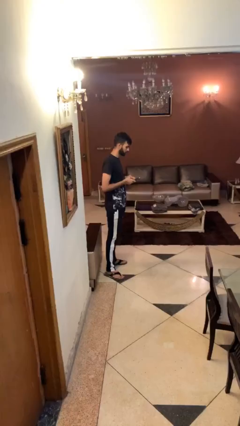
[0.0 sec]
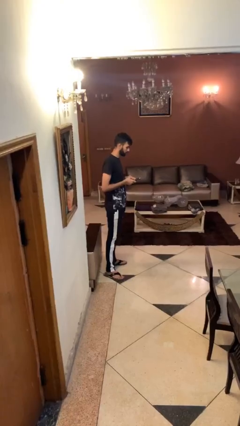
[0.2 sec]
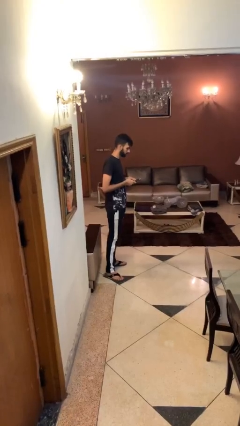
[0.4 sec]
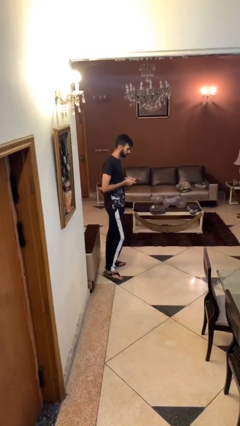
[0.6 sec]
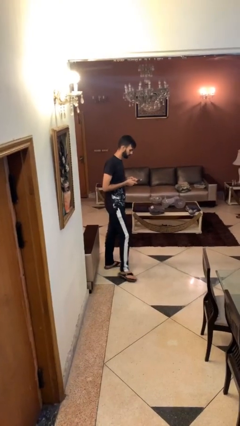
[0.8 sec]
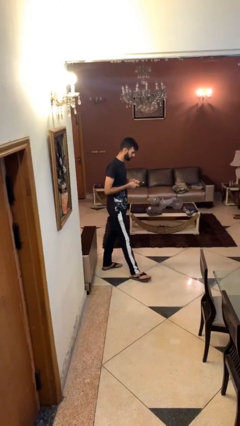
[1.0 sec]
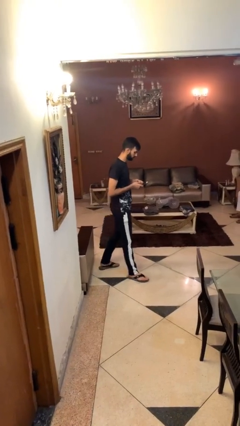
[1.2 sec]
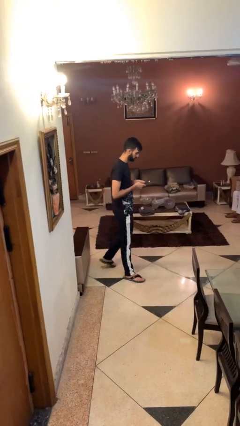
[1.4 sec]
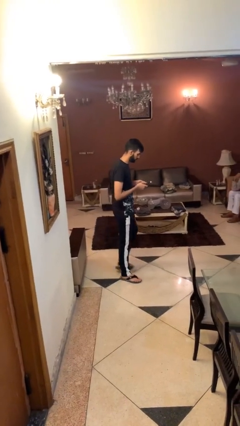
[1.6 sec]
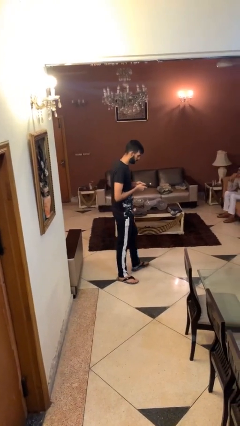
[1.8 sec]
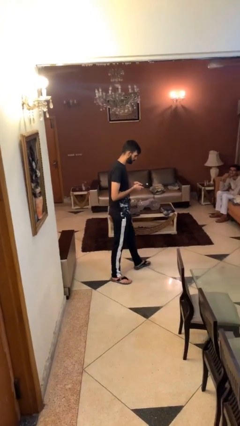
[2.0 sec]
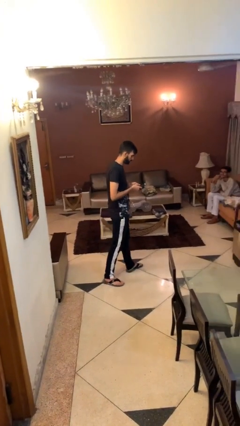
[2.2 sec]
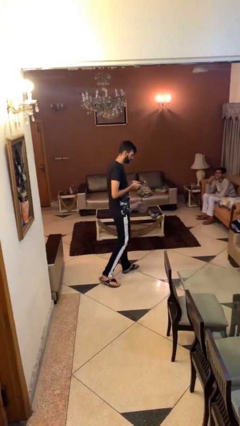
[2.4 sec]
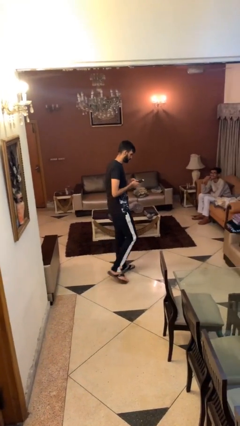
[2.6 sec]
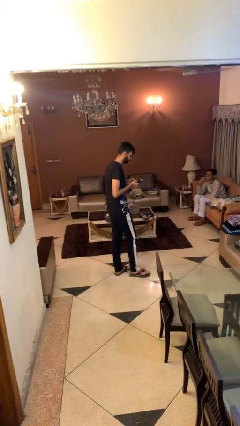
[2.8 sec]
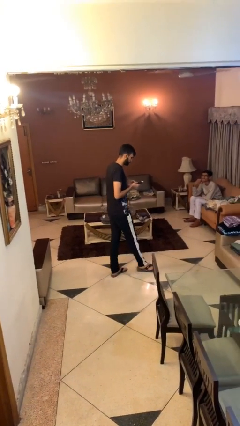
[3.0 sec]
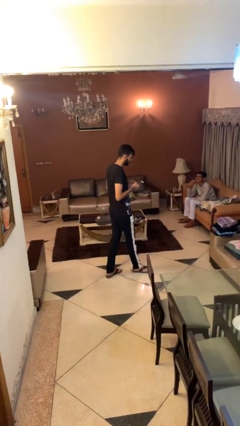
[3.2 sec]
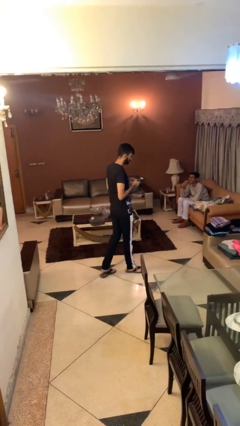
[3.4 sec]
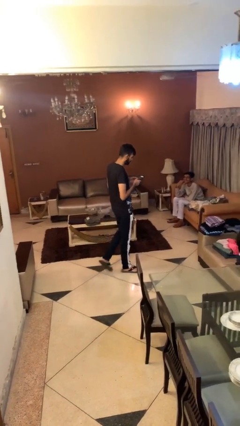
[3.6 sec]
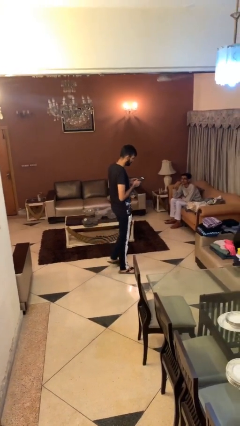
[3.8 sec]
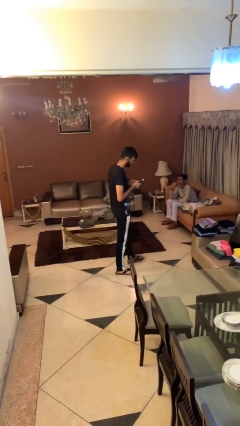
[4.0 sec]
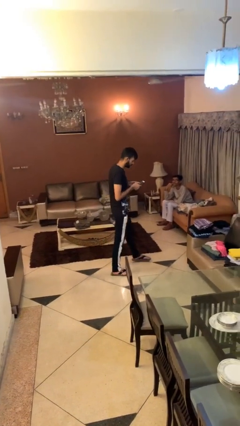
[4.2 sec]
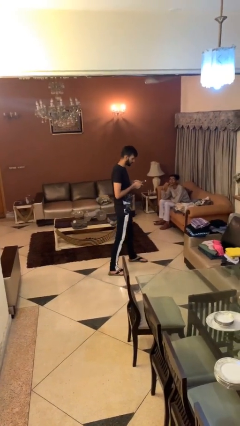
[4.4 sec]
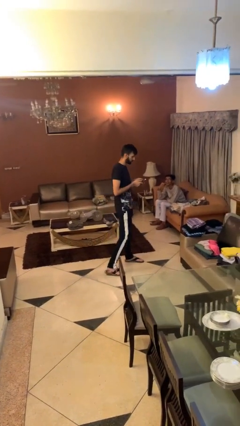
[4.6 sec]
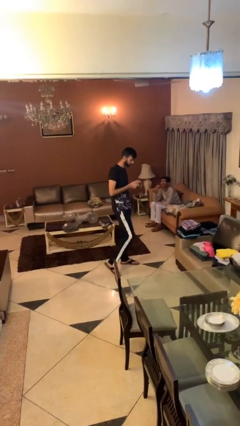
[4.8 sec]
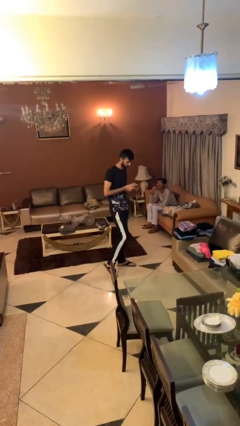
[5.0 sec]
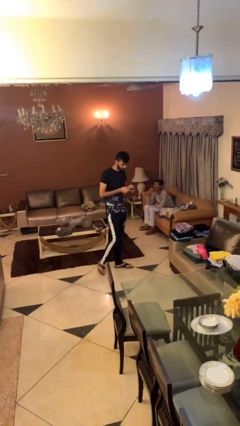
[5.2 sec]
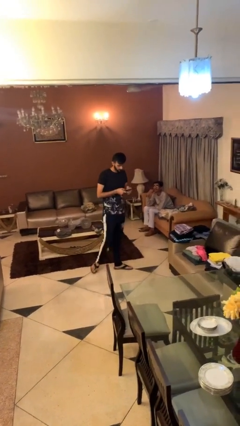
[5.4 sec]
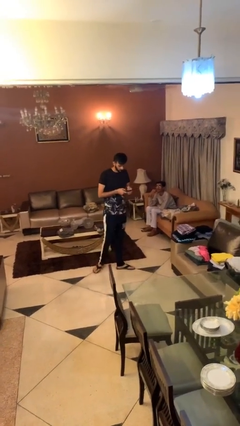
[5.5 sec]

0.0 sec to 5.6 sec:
person texts on phone

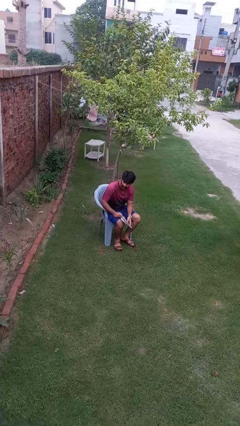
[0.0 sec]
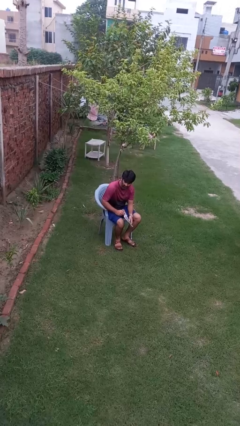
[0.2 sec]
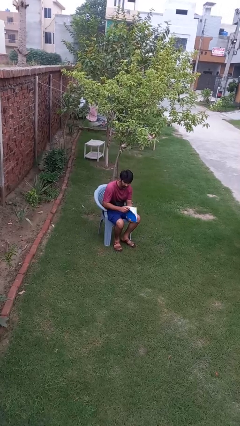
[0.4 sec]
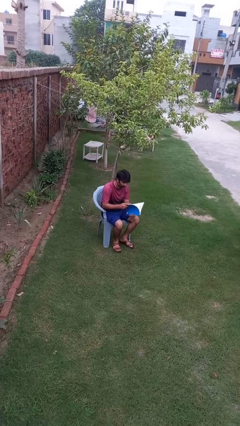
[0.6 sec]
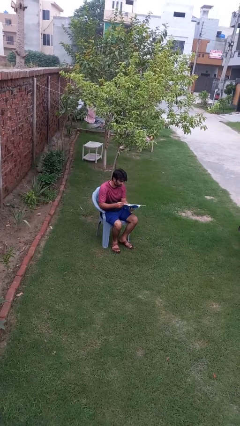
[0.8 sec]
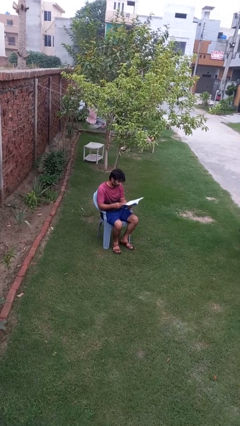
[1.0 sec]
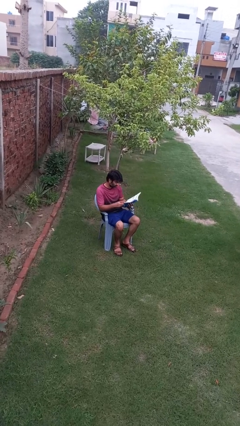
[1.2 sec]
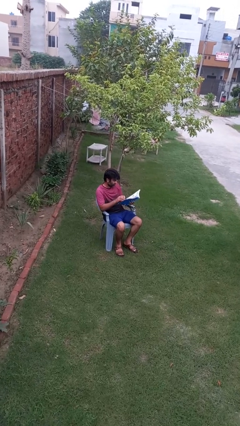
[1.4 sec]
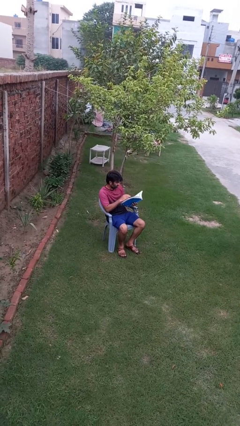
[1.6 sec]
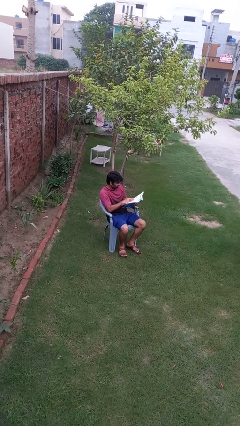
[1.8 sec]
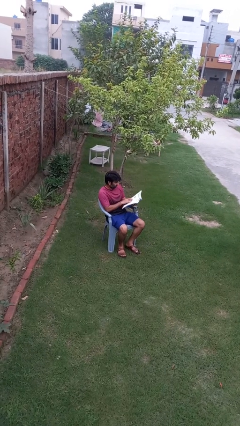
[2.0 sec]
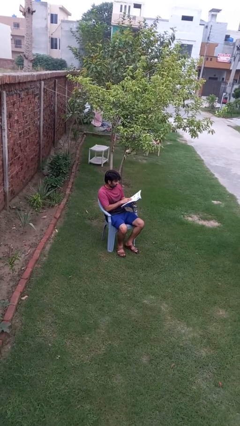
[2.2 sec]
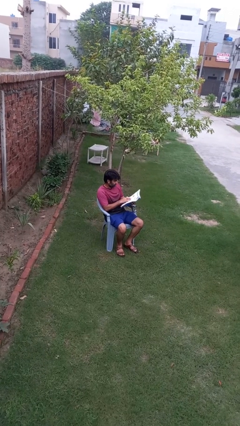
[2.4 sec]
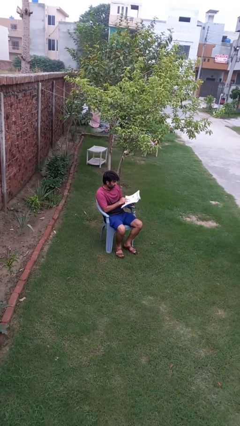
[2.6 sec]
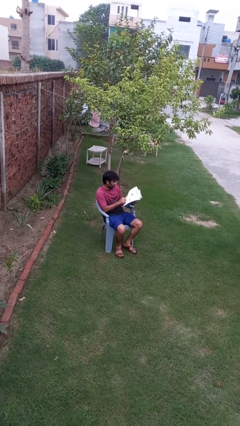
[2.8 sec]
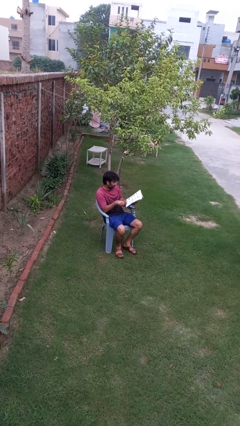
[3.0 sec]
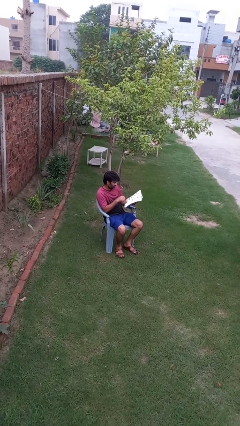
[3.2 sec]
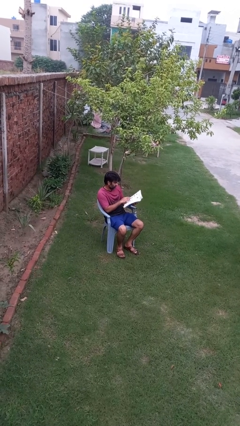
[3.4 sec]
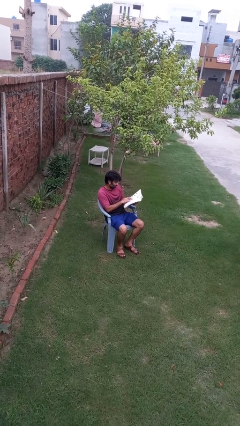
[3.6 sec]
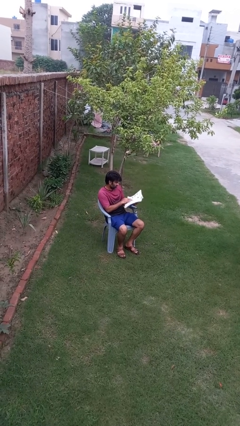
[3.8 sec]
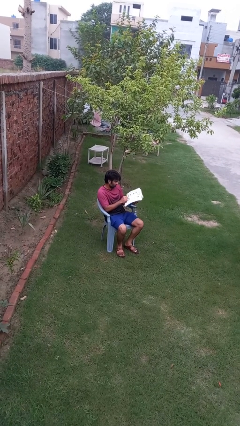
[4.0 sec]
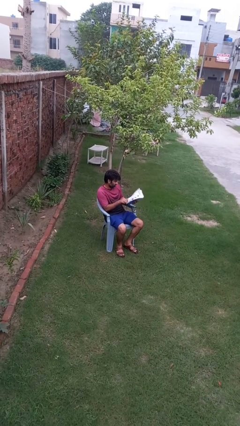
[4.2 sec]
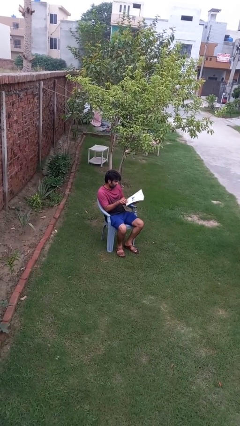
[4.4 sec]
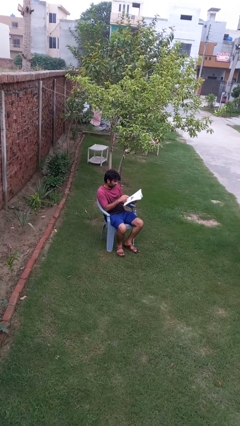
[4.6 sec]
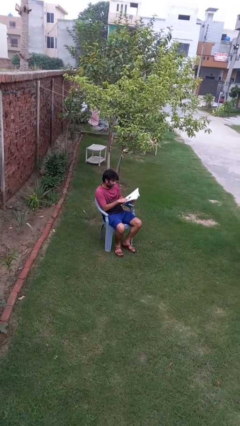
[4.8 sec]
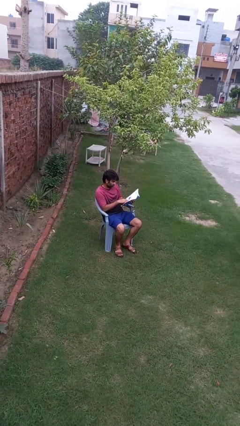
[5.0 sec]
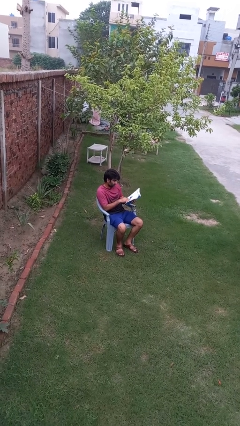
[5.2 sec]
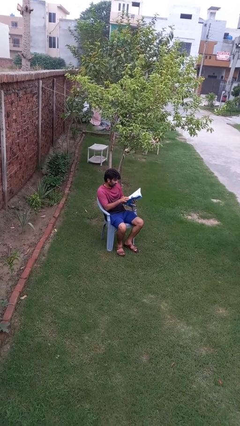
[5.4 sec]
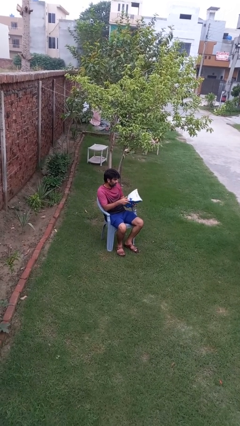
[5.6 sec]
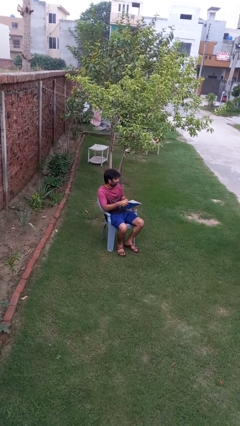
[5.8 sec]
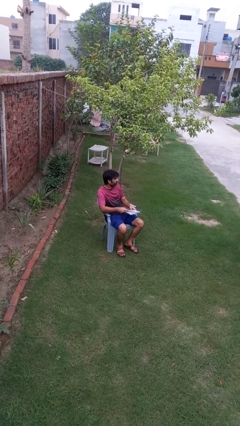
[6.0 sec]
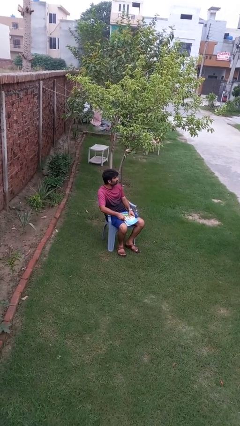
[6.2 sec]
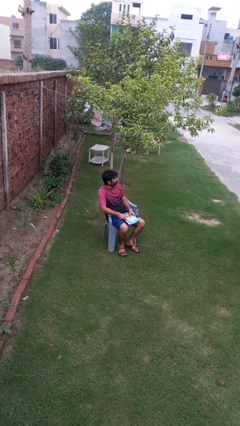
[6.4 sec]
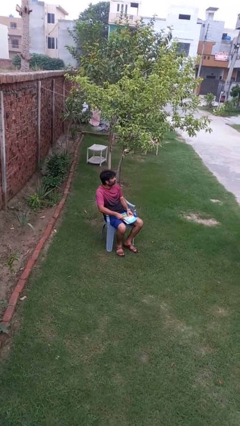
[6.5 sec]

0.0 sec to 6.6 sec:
person reads book

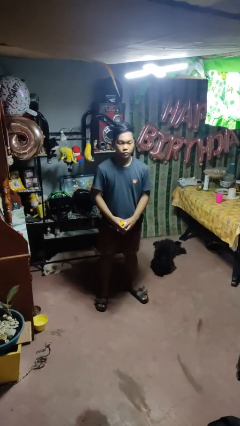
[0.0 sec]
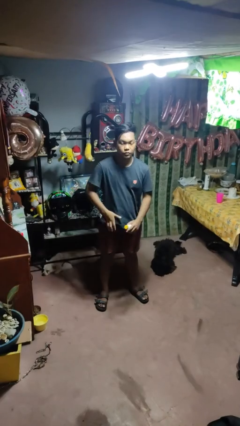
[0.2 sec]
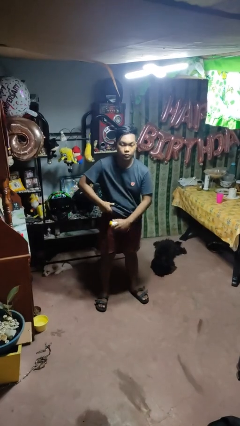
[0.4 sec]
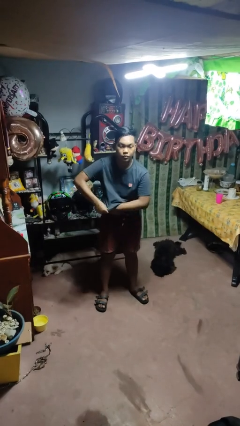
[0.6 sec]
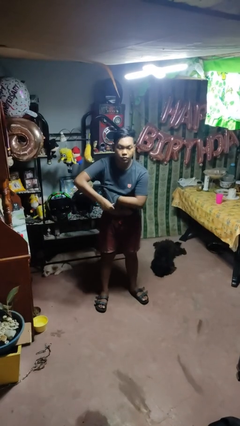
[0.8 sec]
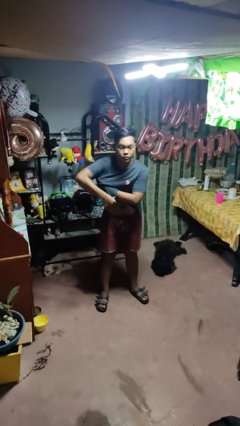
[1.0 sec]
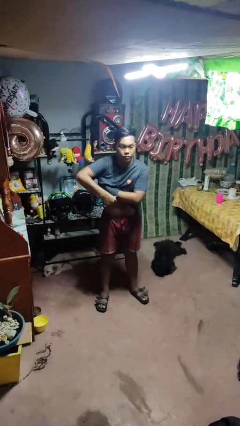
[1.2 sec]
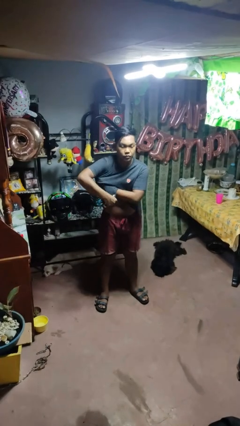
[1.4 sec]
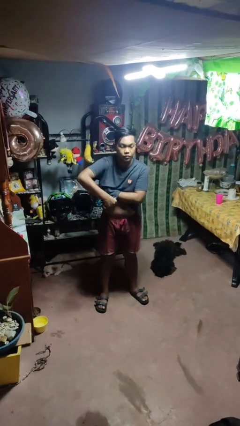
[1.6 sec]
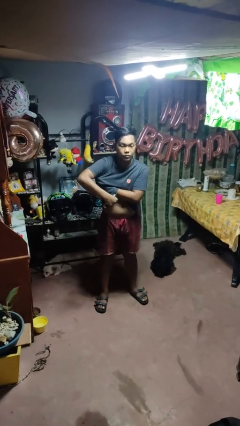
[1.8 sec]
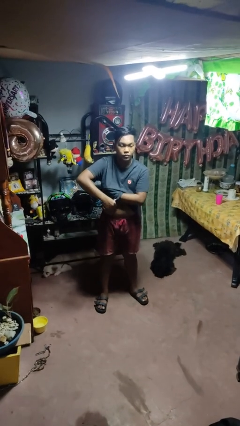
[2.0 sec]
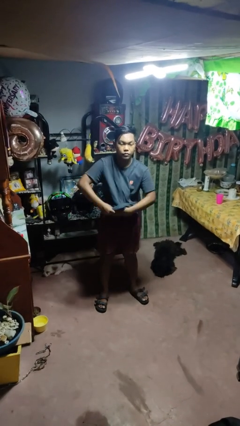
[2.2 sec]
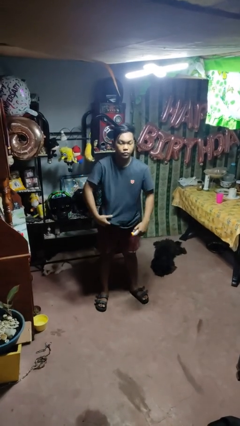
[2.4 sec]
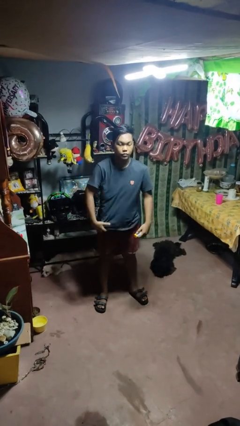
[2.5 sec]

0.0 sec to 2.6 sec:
person applies deodorant

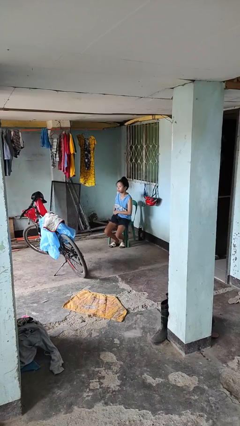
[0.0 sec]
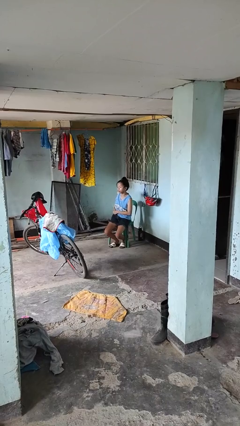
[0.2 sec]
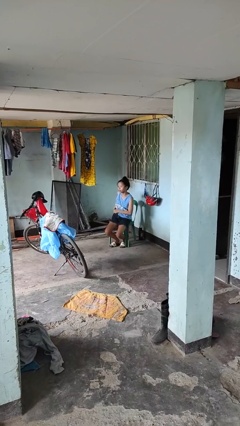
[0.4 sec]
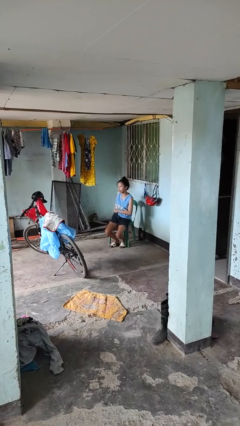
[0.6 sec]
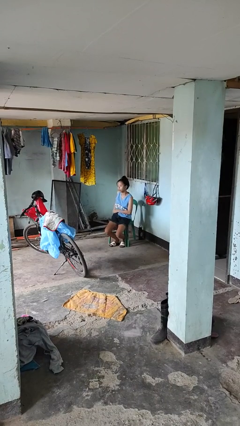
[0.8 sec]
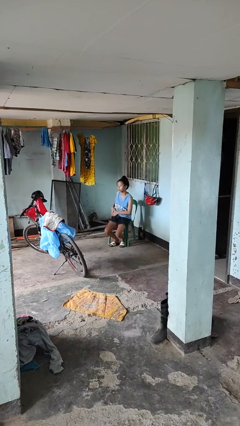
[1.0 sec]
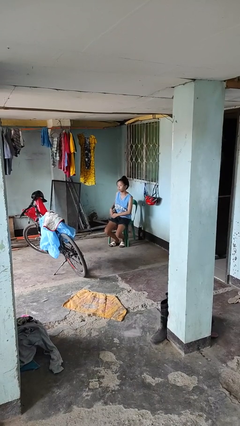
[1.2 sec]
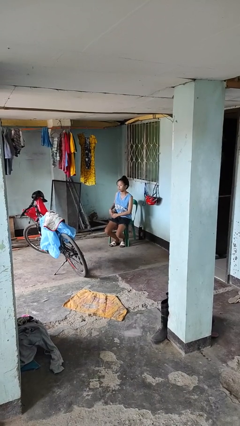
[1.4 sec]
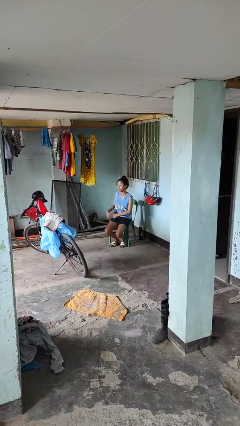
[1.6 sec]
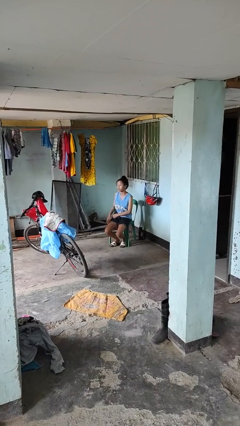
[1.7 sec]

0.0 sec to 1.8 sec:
person puts phone into pocket

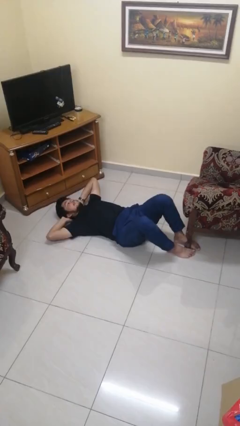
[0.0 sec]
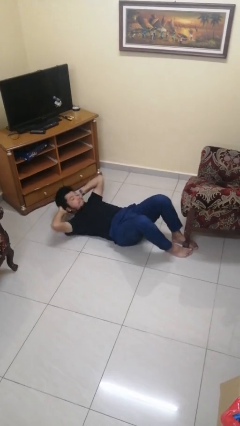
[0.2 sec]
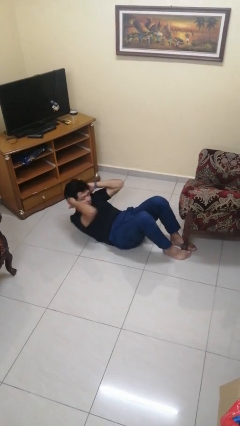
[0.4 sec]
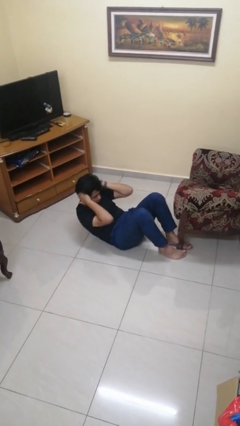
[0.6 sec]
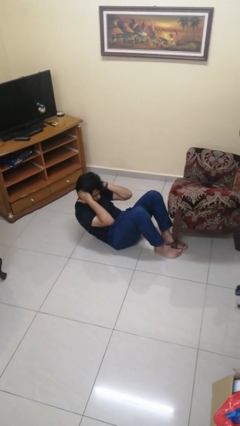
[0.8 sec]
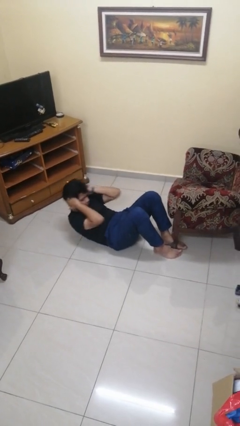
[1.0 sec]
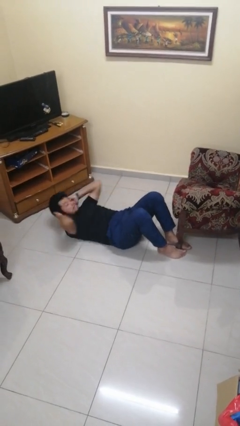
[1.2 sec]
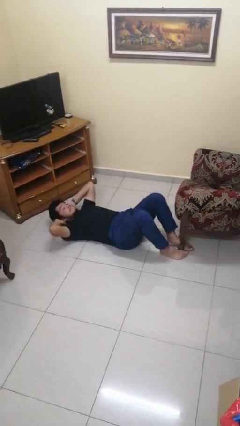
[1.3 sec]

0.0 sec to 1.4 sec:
person exercises with situp
